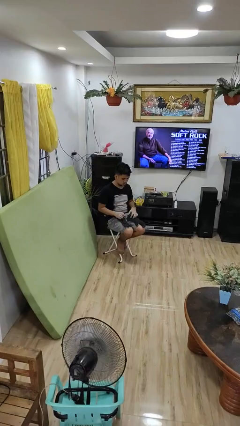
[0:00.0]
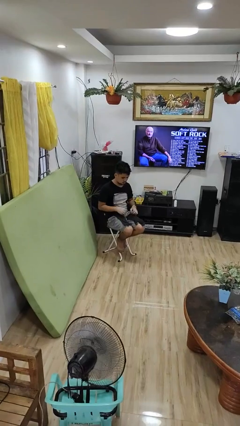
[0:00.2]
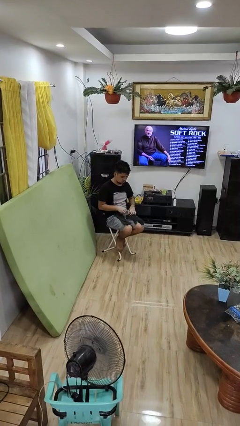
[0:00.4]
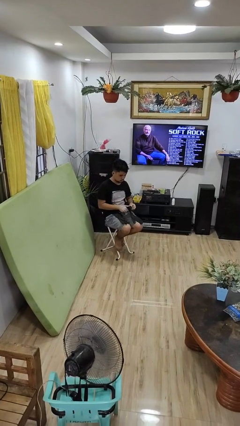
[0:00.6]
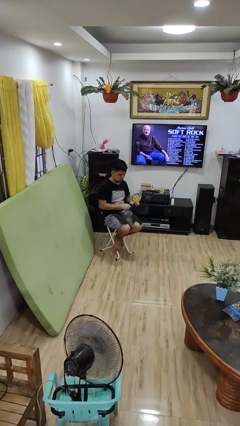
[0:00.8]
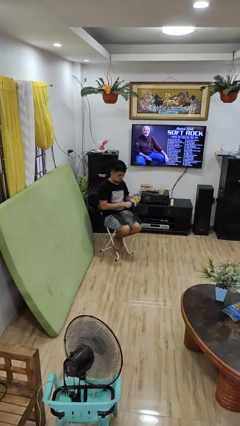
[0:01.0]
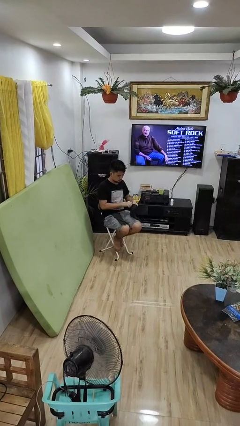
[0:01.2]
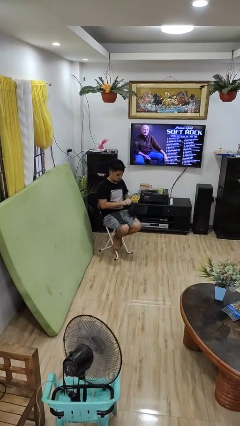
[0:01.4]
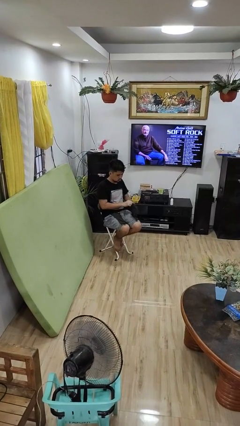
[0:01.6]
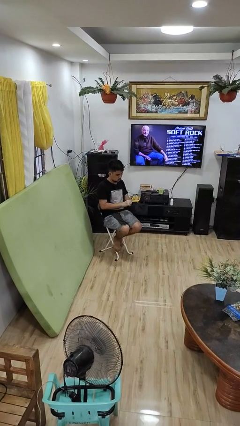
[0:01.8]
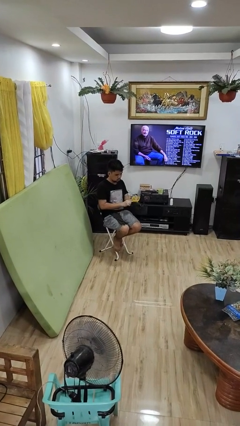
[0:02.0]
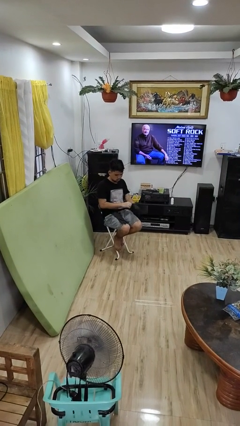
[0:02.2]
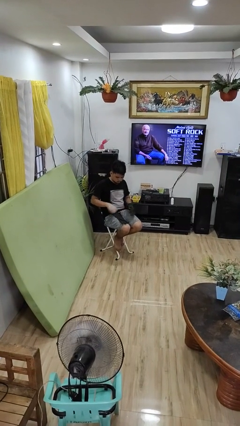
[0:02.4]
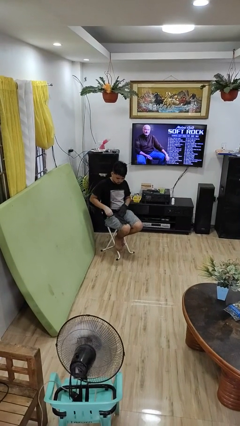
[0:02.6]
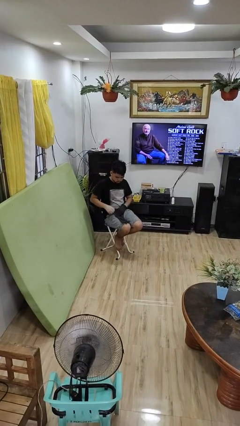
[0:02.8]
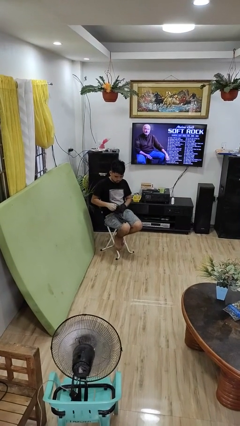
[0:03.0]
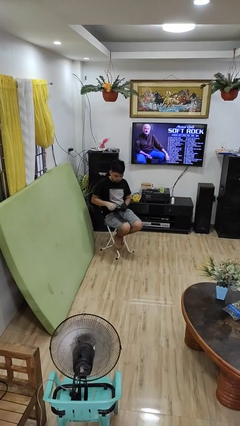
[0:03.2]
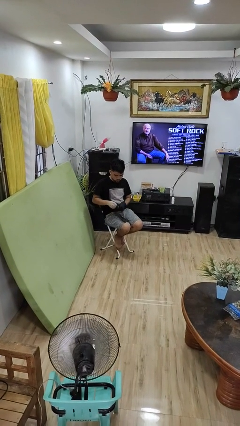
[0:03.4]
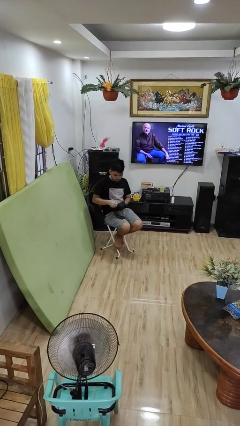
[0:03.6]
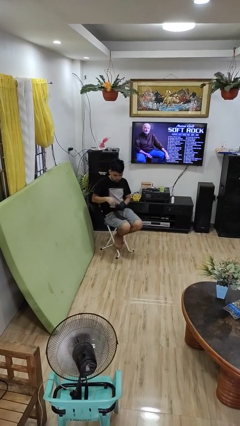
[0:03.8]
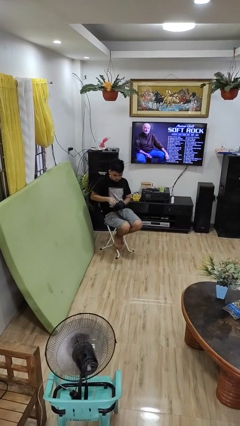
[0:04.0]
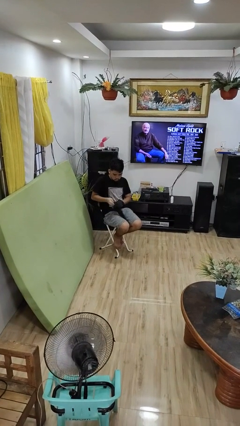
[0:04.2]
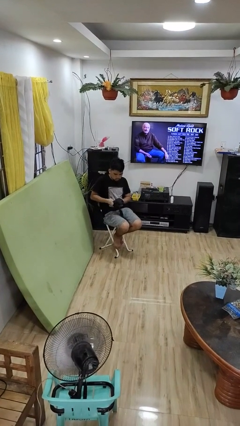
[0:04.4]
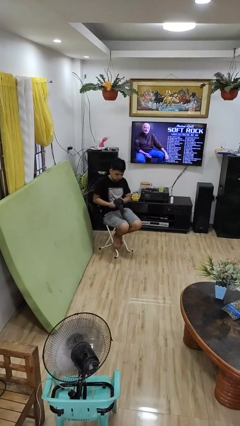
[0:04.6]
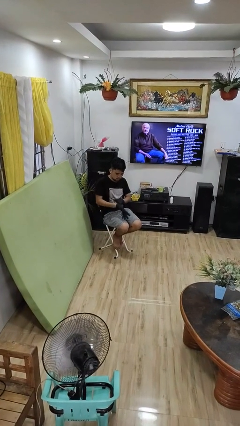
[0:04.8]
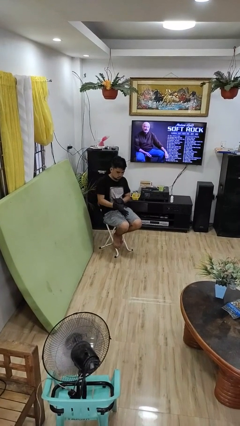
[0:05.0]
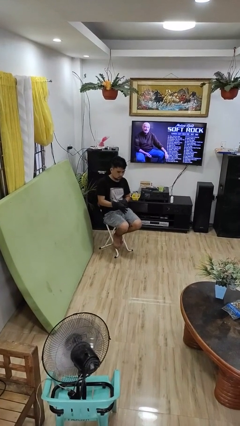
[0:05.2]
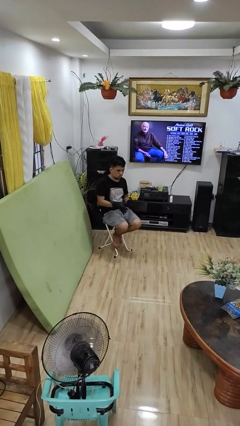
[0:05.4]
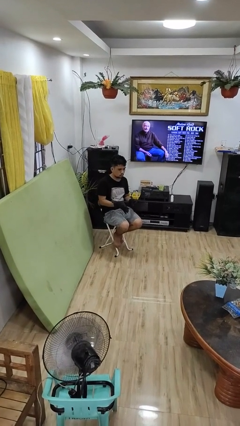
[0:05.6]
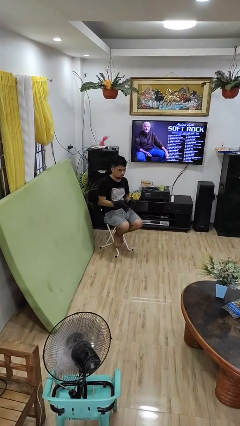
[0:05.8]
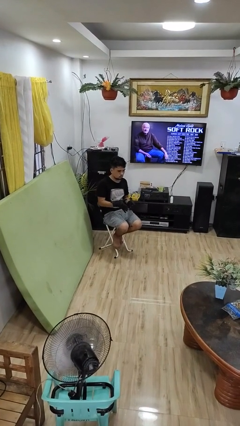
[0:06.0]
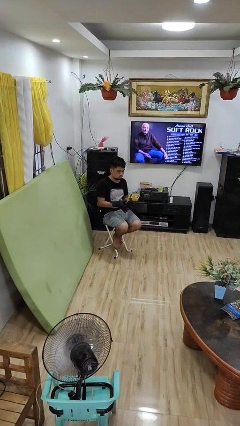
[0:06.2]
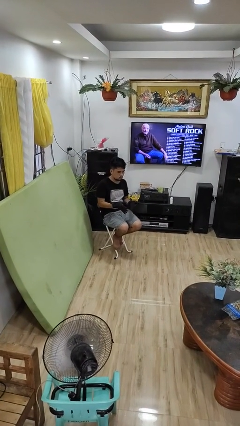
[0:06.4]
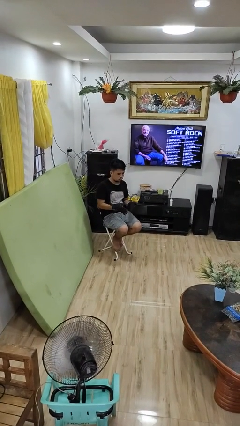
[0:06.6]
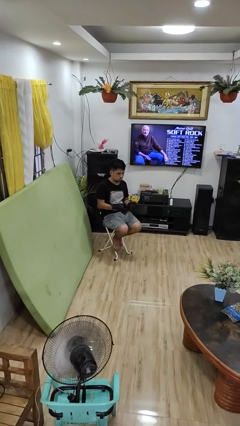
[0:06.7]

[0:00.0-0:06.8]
person puts on gloves

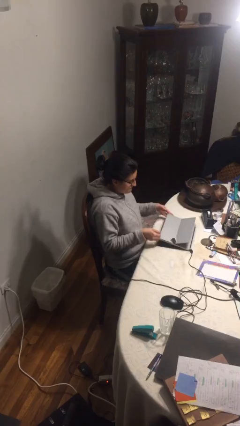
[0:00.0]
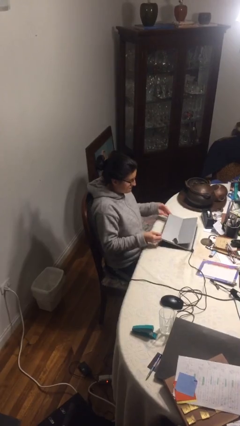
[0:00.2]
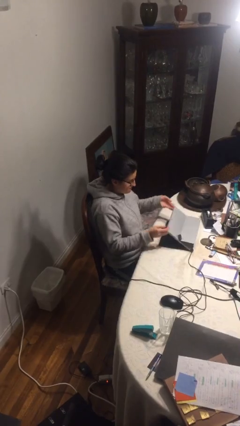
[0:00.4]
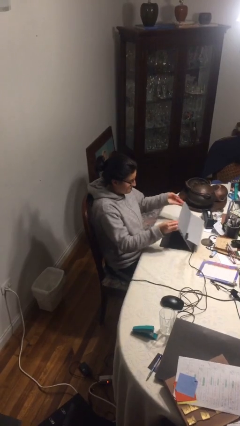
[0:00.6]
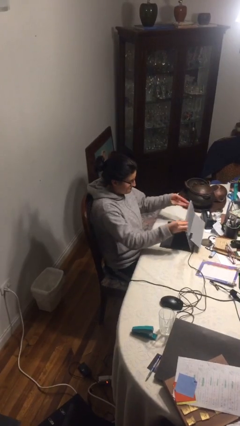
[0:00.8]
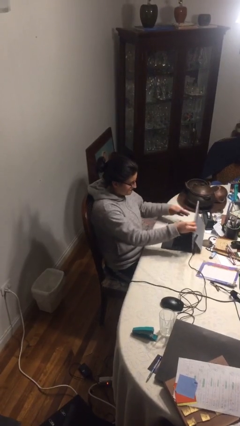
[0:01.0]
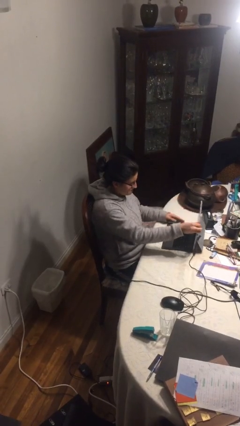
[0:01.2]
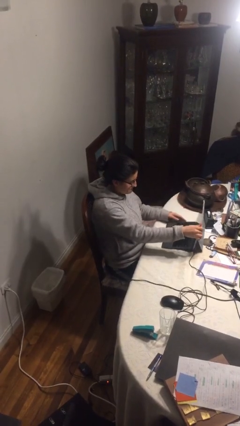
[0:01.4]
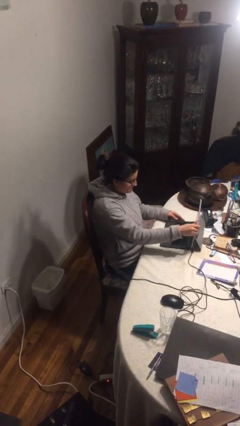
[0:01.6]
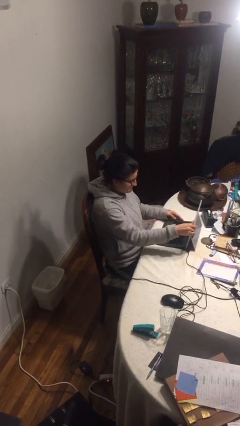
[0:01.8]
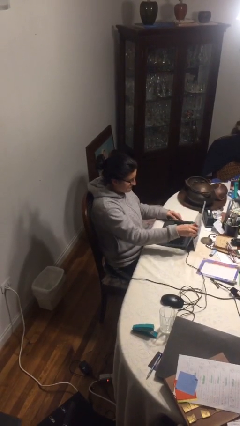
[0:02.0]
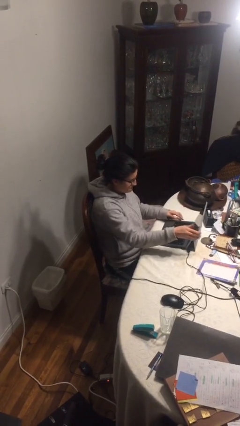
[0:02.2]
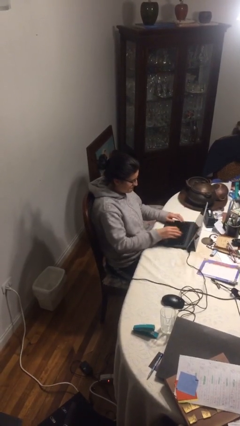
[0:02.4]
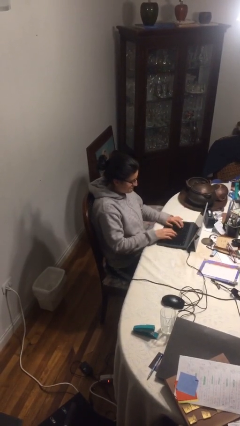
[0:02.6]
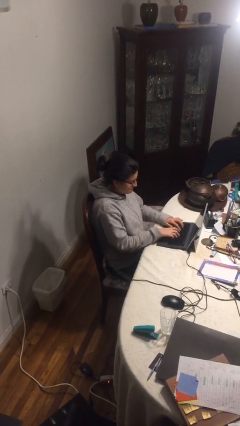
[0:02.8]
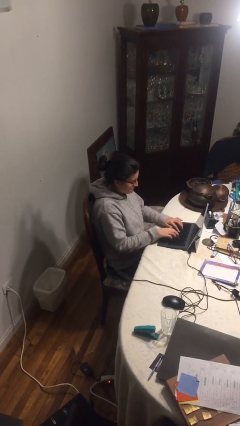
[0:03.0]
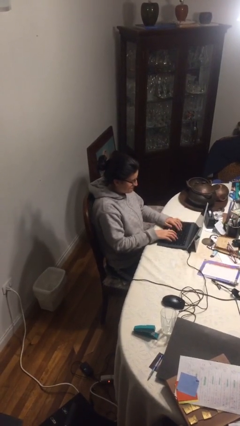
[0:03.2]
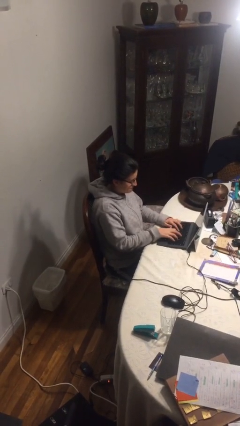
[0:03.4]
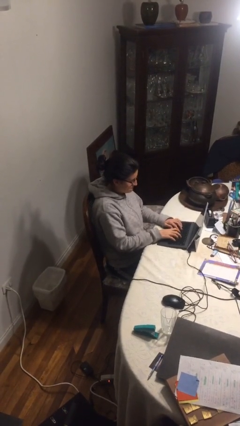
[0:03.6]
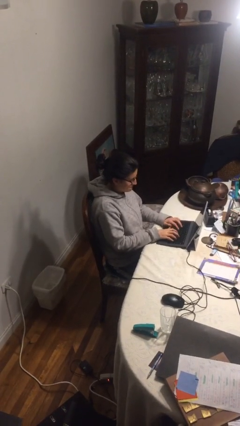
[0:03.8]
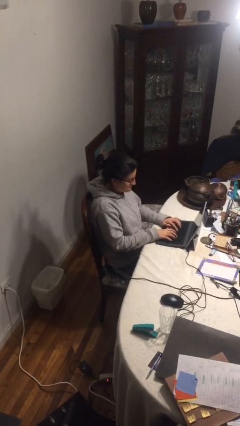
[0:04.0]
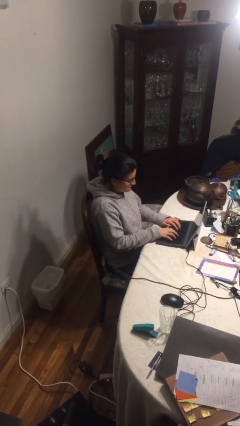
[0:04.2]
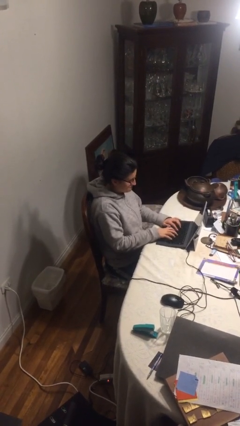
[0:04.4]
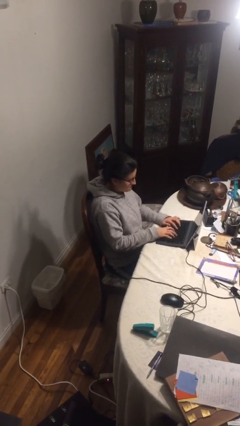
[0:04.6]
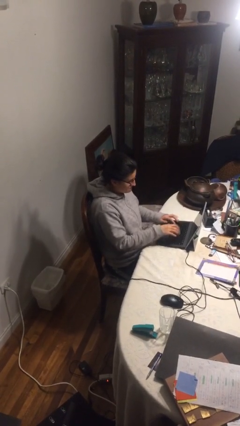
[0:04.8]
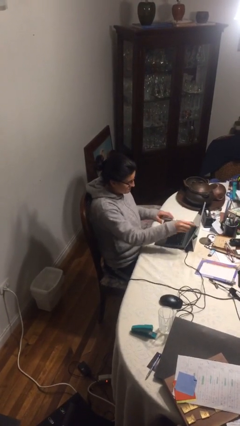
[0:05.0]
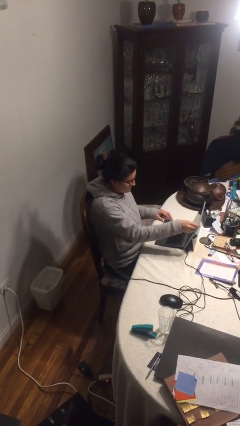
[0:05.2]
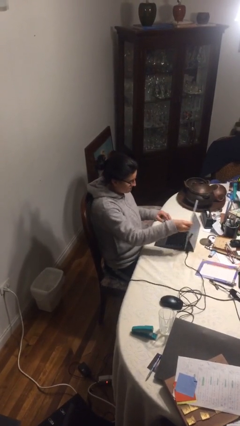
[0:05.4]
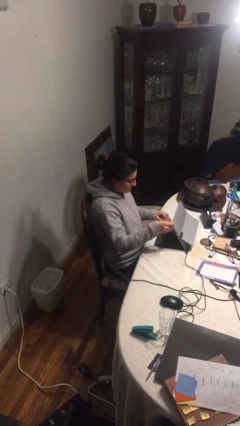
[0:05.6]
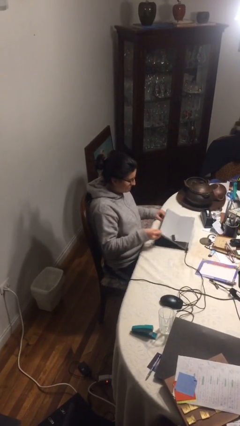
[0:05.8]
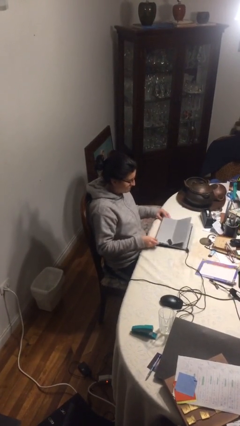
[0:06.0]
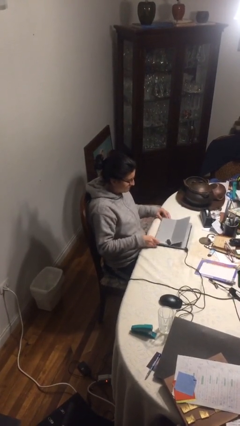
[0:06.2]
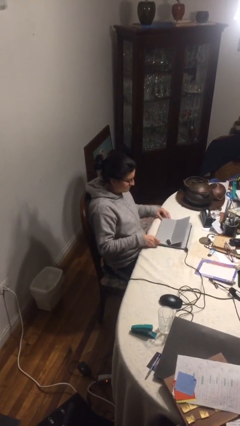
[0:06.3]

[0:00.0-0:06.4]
person interacts with laptop

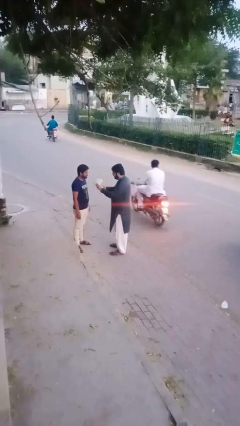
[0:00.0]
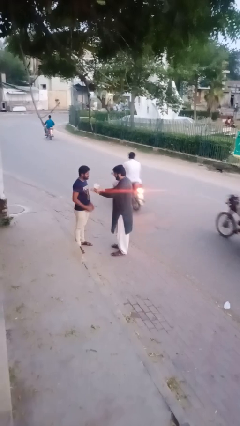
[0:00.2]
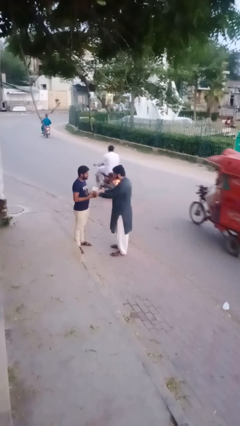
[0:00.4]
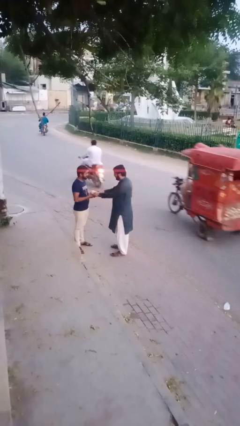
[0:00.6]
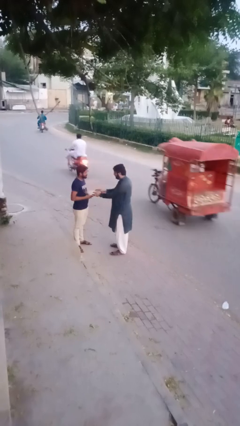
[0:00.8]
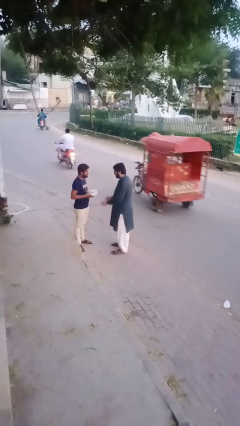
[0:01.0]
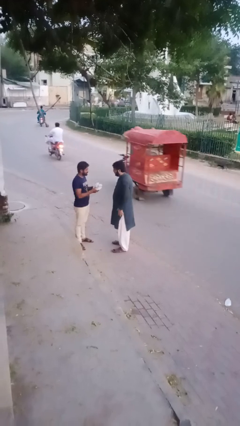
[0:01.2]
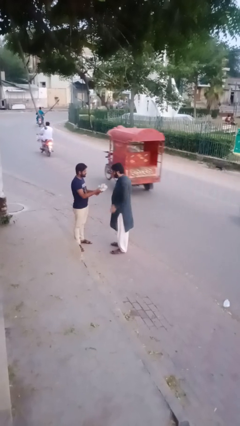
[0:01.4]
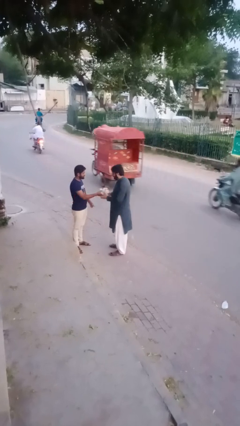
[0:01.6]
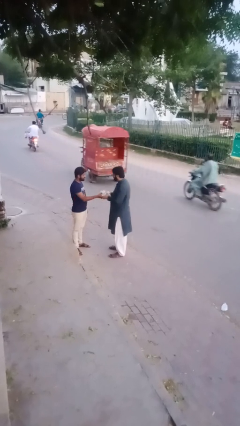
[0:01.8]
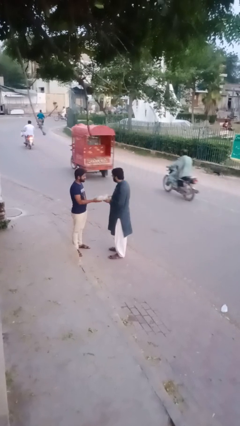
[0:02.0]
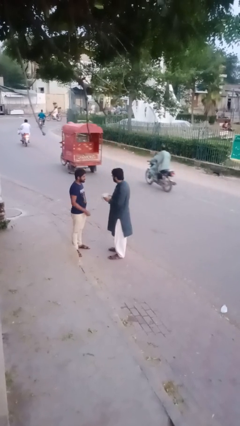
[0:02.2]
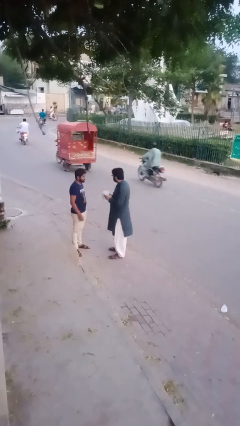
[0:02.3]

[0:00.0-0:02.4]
person transfers object to person

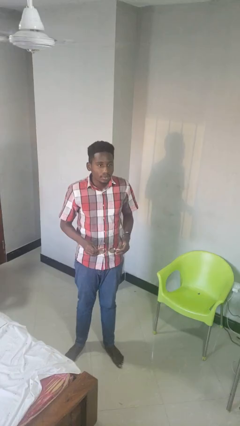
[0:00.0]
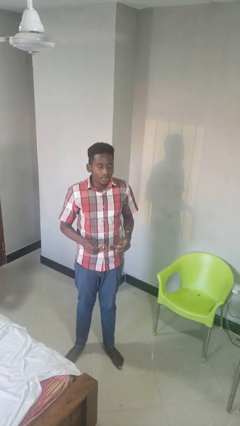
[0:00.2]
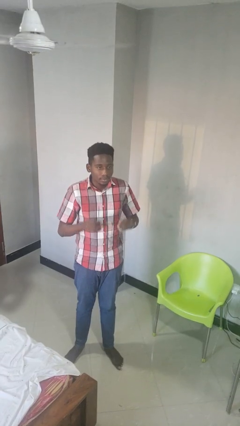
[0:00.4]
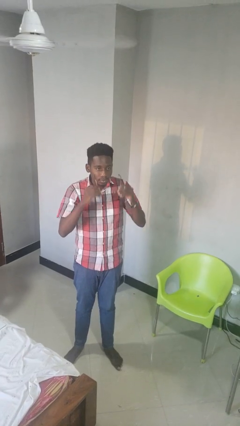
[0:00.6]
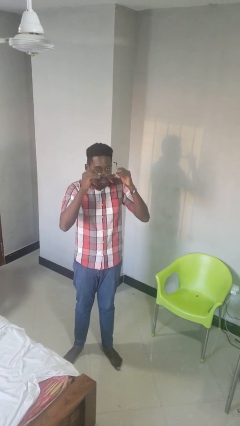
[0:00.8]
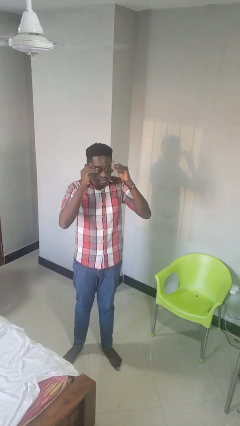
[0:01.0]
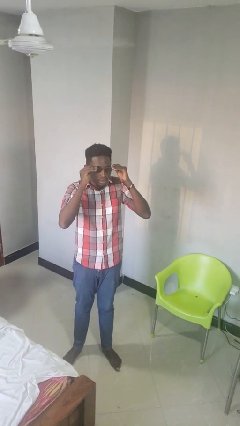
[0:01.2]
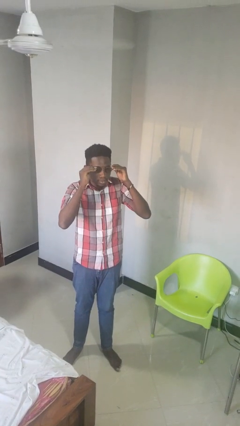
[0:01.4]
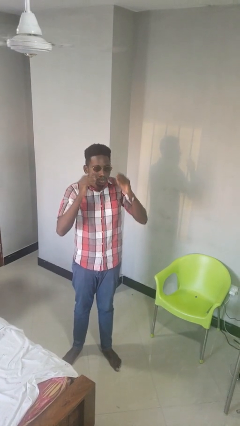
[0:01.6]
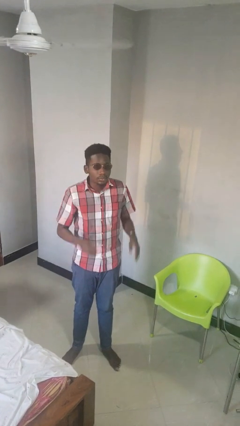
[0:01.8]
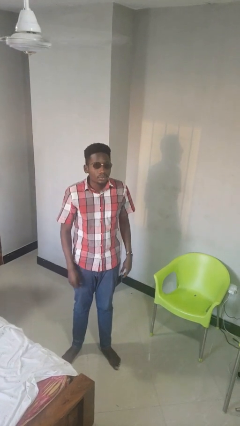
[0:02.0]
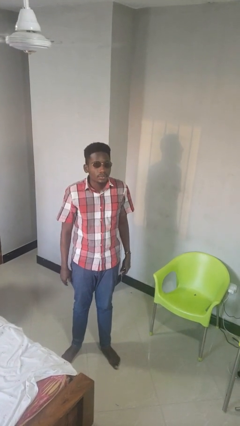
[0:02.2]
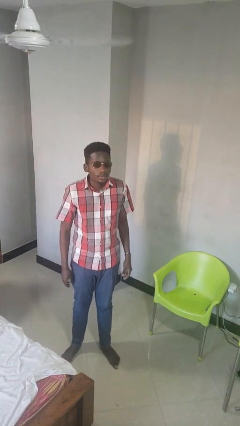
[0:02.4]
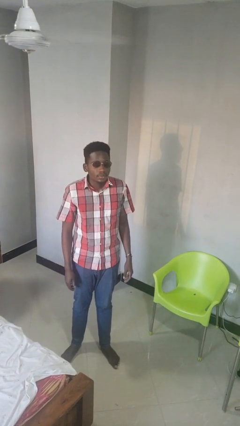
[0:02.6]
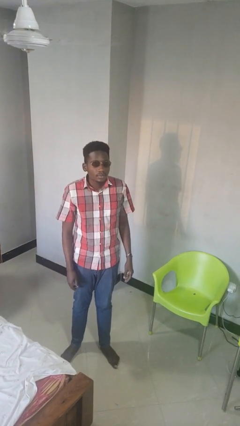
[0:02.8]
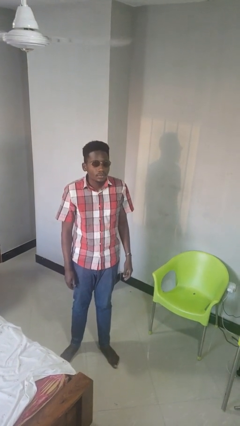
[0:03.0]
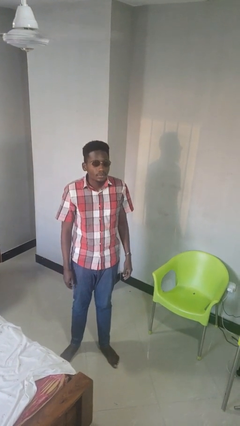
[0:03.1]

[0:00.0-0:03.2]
person puts on sunglasses
